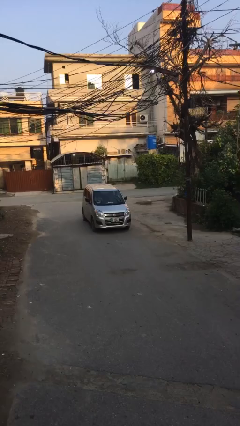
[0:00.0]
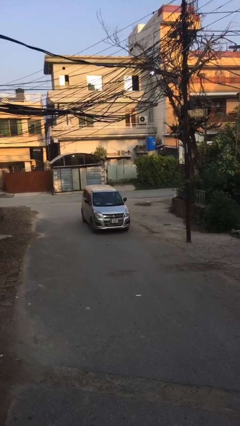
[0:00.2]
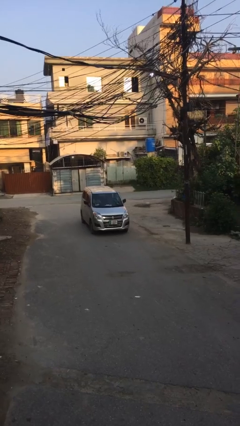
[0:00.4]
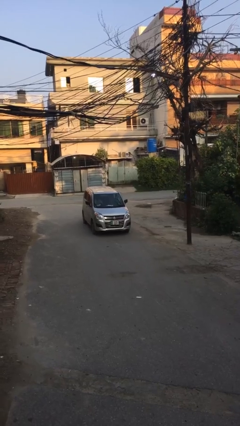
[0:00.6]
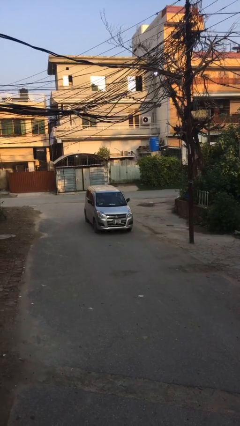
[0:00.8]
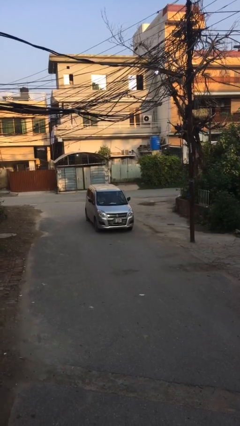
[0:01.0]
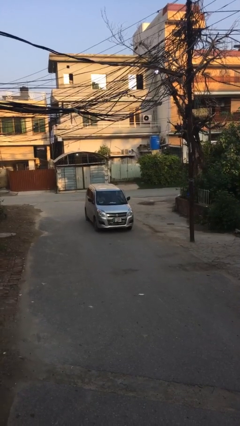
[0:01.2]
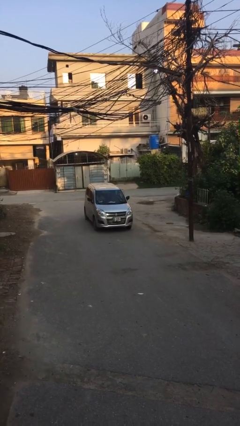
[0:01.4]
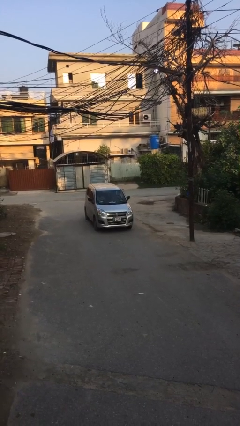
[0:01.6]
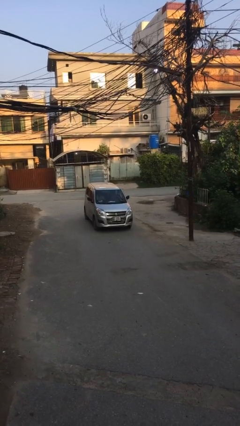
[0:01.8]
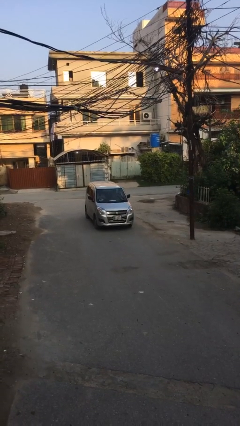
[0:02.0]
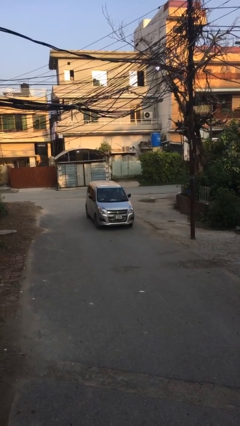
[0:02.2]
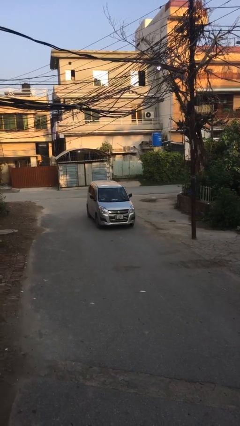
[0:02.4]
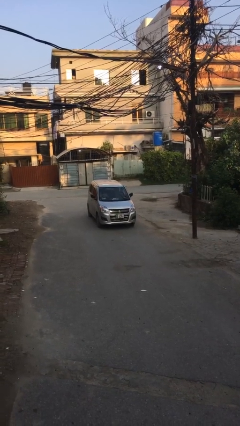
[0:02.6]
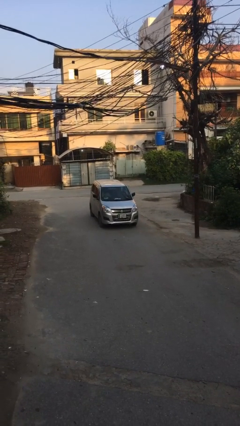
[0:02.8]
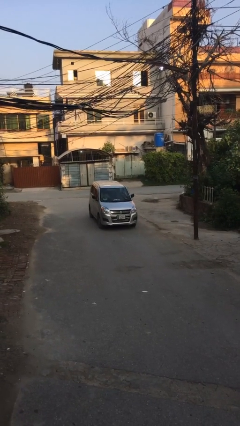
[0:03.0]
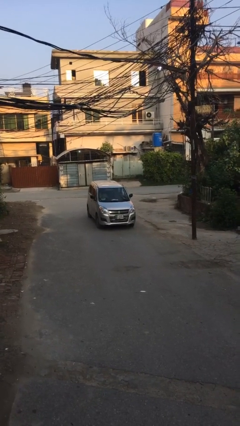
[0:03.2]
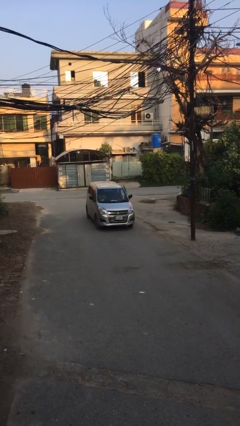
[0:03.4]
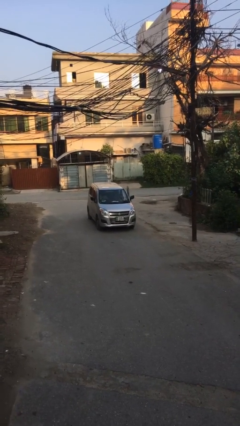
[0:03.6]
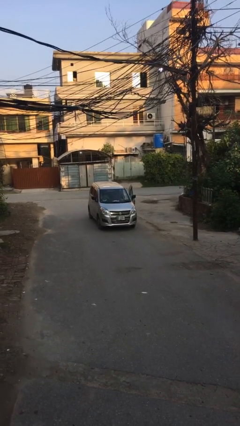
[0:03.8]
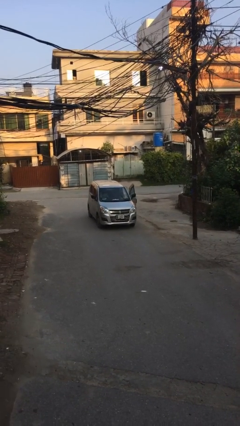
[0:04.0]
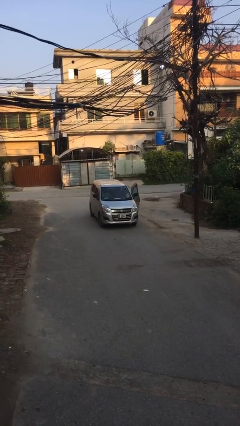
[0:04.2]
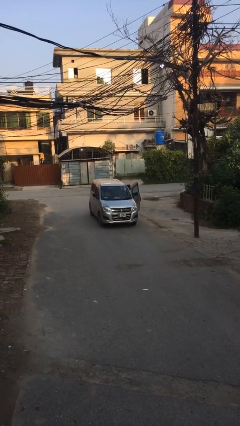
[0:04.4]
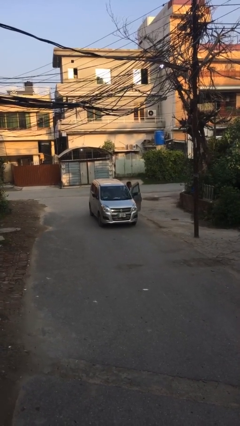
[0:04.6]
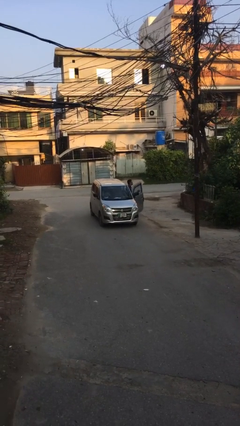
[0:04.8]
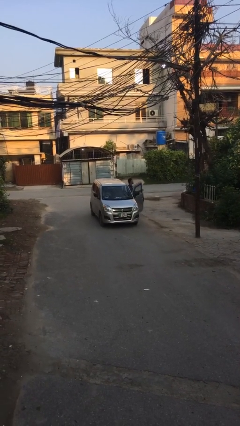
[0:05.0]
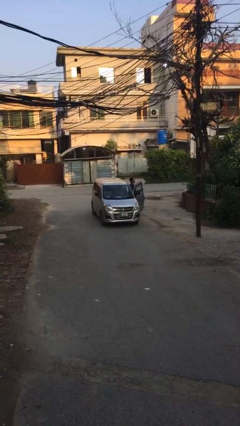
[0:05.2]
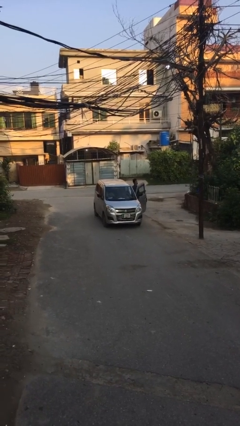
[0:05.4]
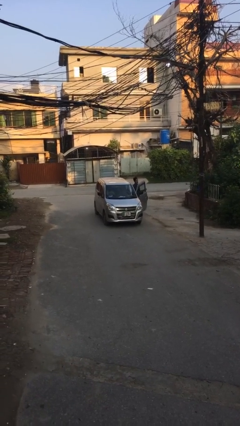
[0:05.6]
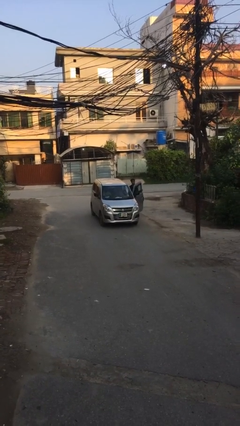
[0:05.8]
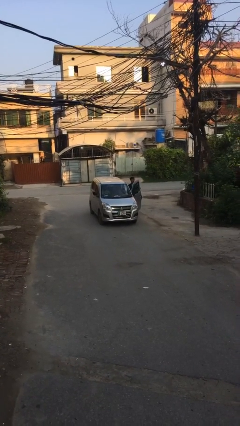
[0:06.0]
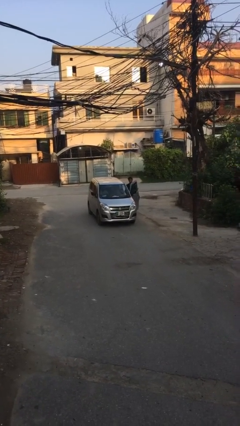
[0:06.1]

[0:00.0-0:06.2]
car drops off person

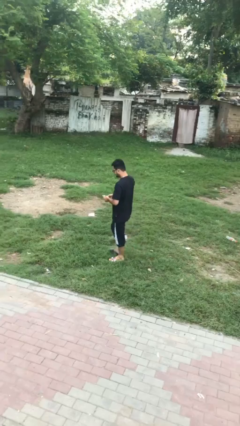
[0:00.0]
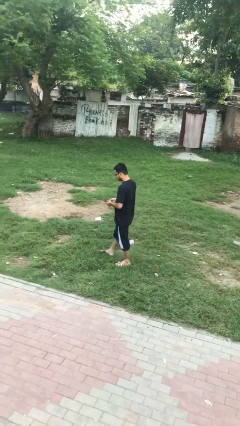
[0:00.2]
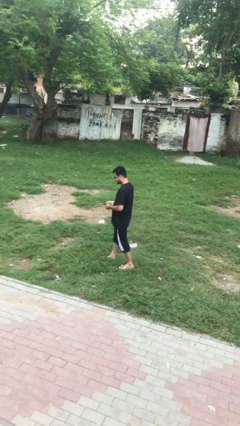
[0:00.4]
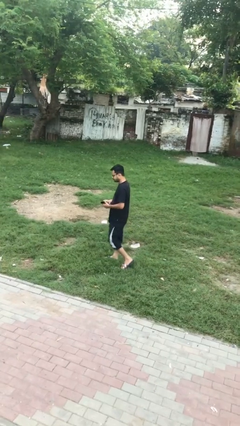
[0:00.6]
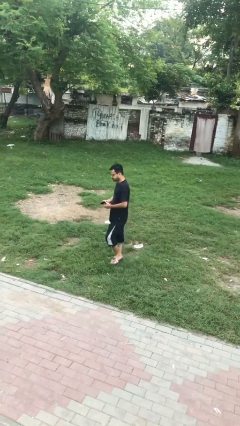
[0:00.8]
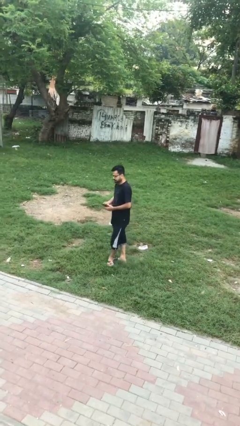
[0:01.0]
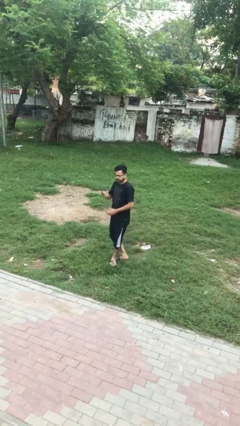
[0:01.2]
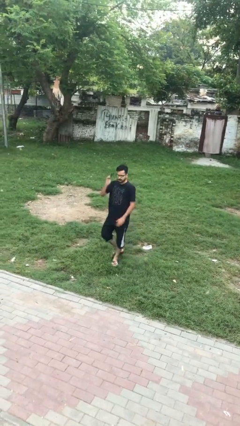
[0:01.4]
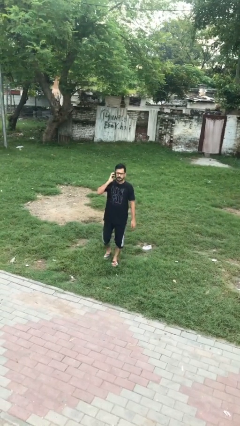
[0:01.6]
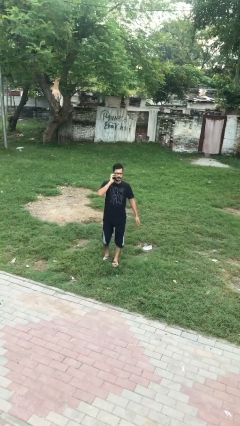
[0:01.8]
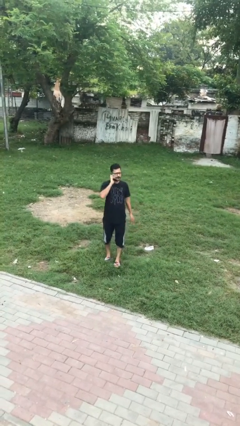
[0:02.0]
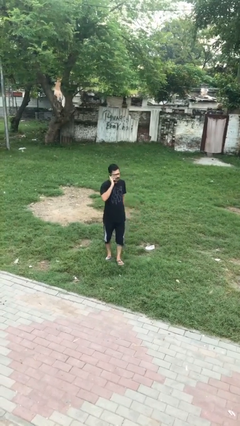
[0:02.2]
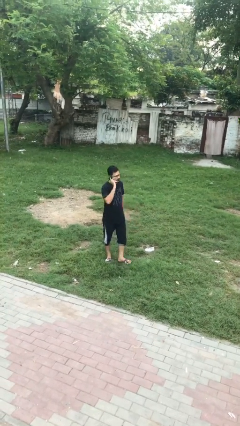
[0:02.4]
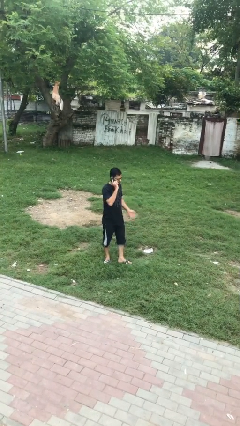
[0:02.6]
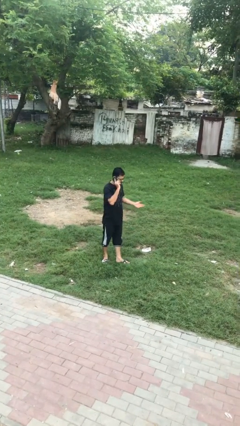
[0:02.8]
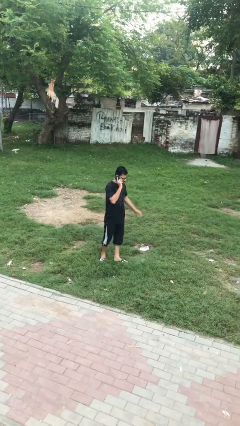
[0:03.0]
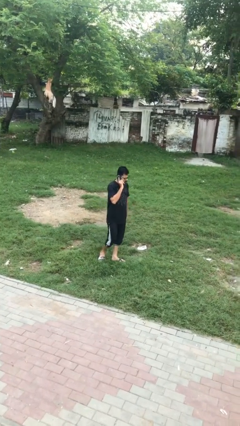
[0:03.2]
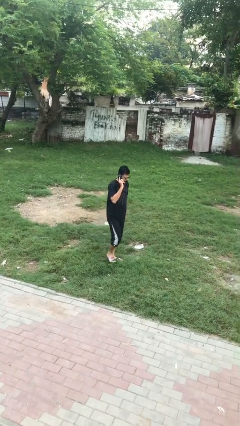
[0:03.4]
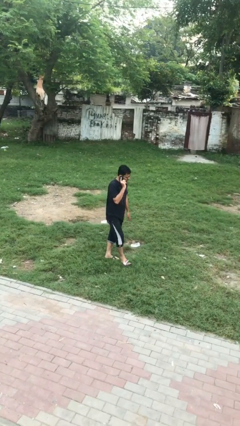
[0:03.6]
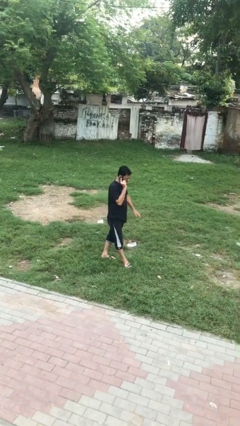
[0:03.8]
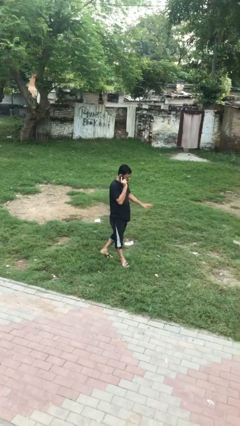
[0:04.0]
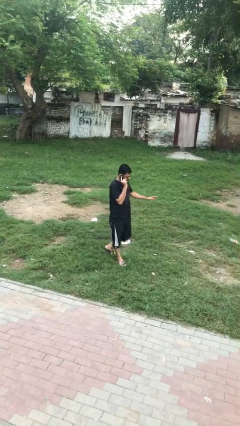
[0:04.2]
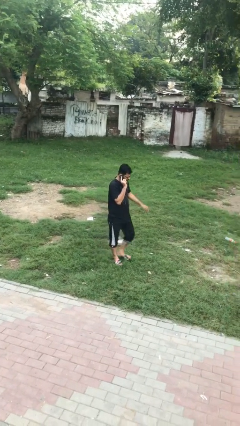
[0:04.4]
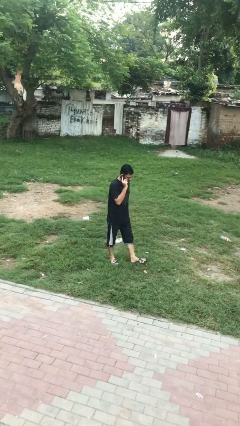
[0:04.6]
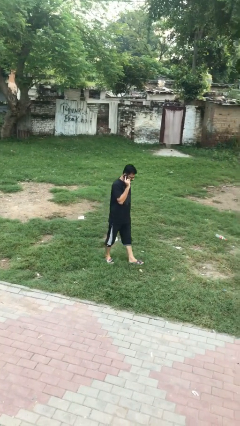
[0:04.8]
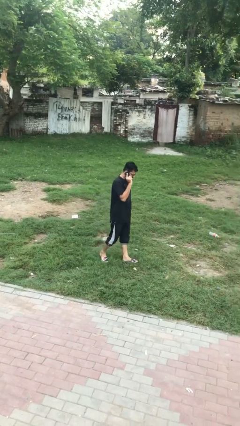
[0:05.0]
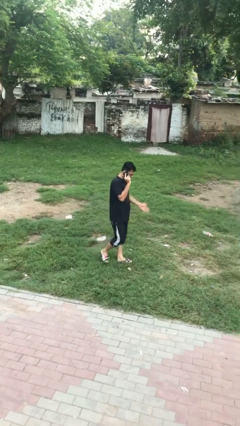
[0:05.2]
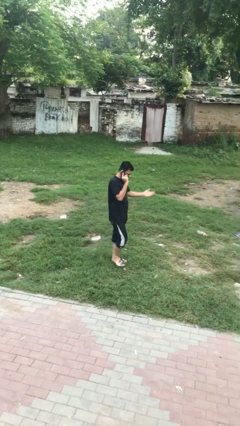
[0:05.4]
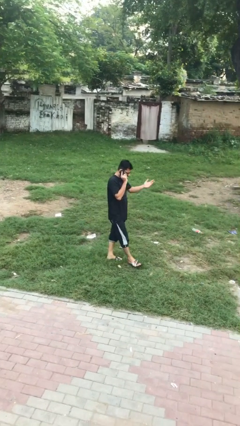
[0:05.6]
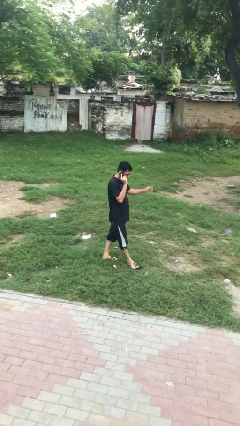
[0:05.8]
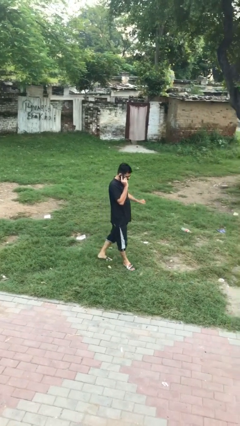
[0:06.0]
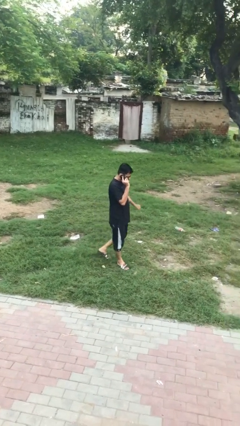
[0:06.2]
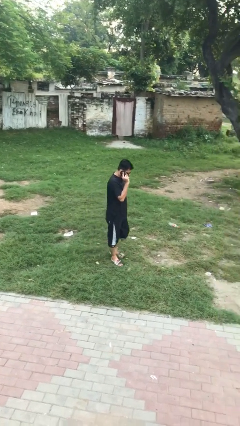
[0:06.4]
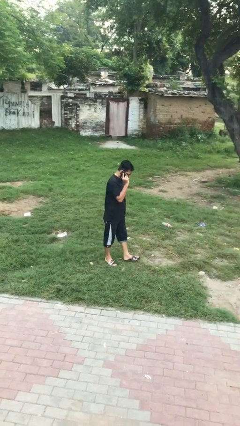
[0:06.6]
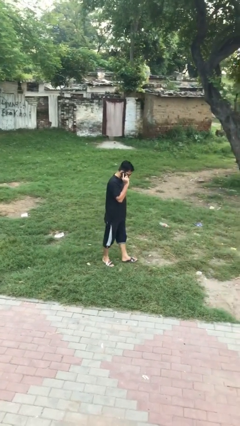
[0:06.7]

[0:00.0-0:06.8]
person talks on phone

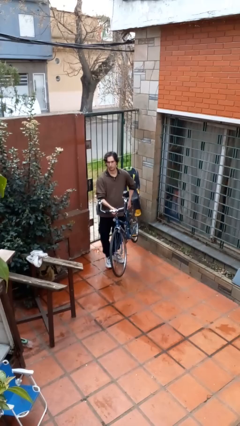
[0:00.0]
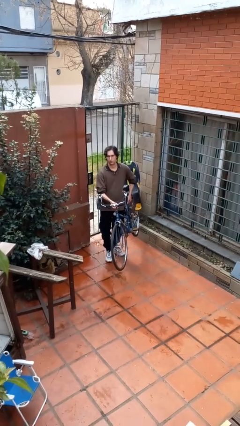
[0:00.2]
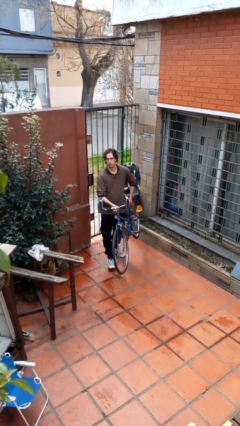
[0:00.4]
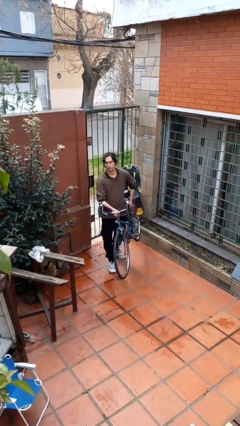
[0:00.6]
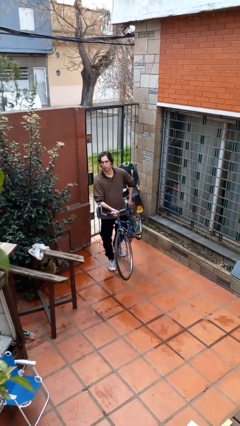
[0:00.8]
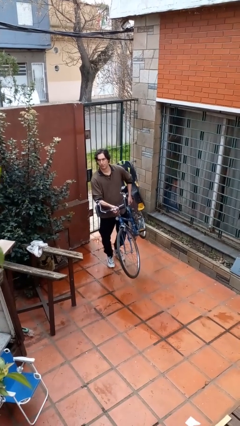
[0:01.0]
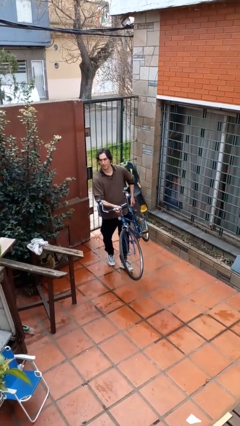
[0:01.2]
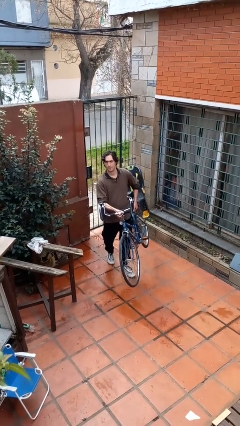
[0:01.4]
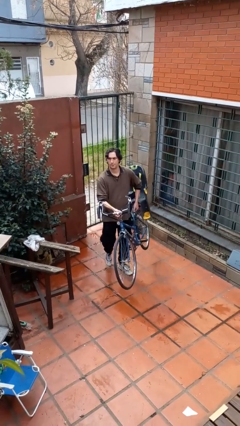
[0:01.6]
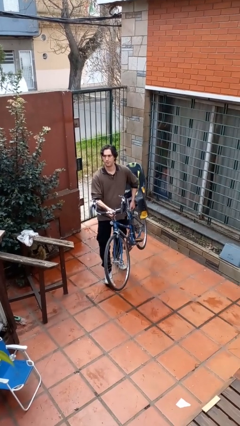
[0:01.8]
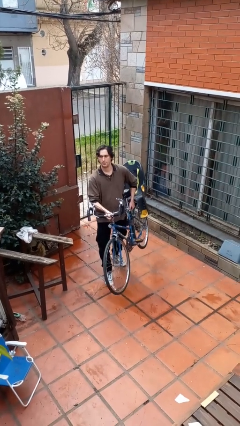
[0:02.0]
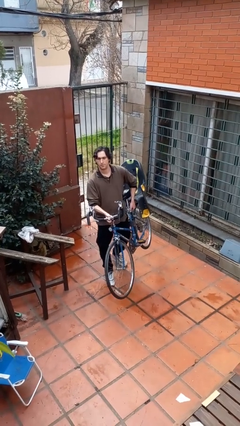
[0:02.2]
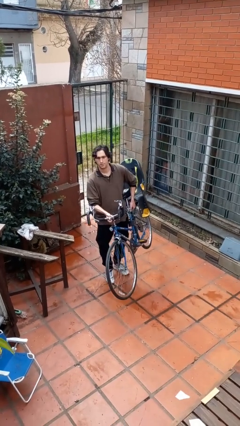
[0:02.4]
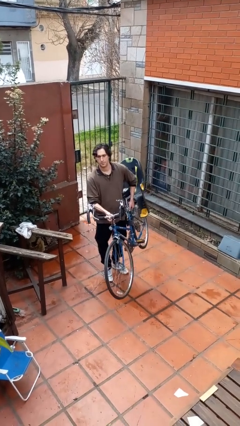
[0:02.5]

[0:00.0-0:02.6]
person carries bicycle

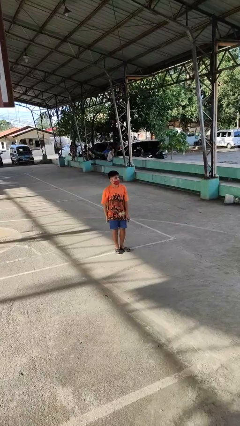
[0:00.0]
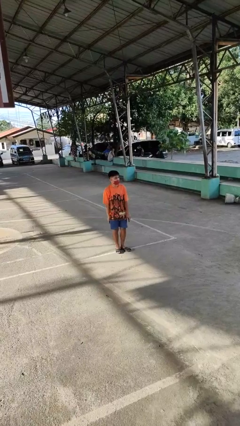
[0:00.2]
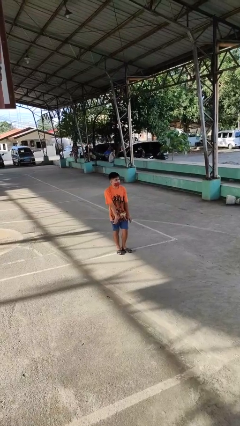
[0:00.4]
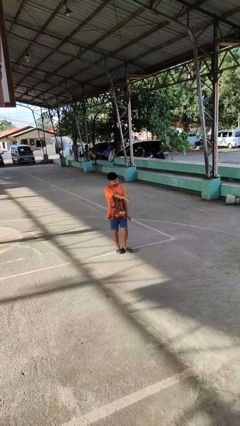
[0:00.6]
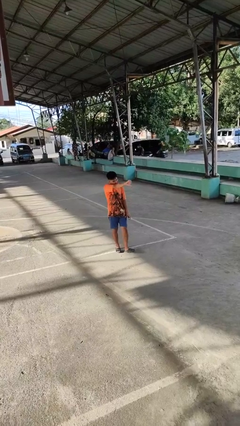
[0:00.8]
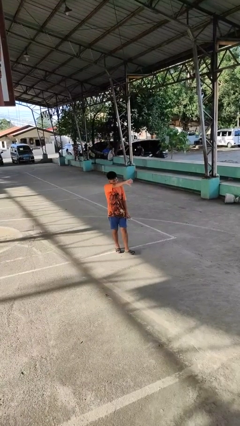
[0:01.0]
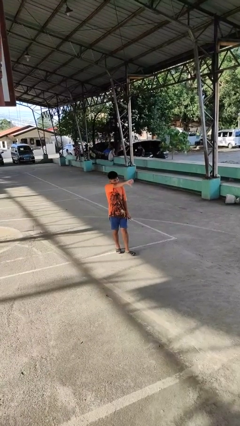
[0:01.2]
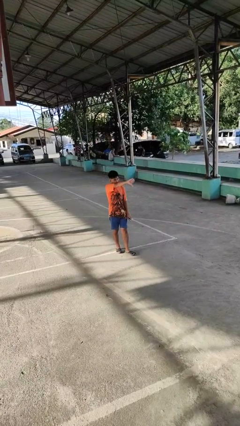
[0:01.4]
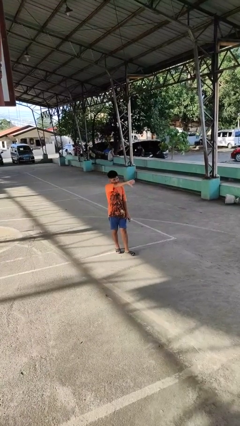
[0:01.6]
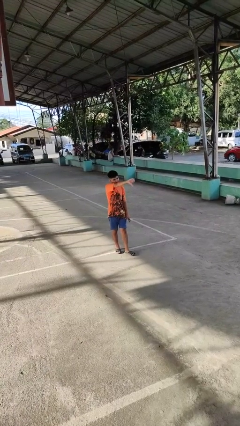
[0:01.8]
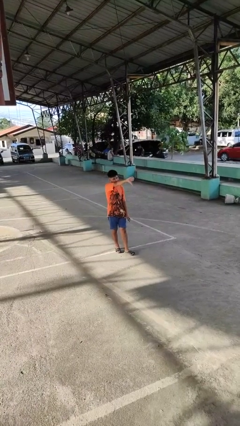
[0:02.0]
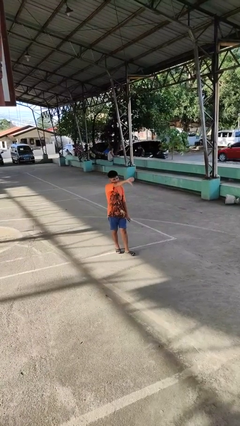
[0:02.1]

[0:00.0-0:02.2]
person gestures thumbs down
